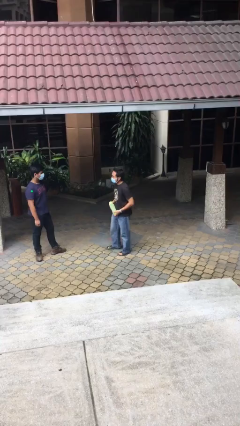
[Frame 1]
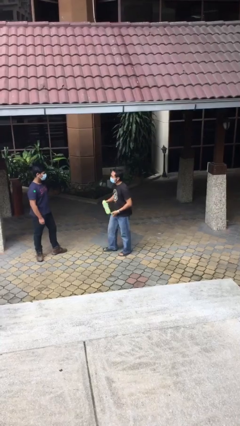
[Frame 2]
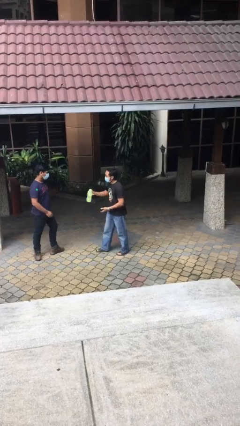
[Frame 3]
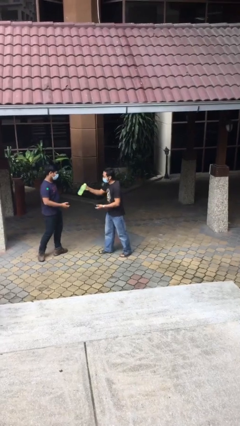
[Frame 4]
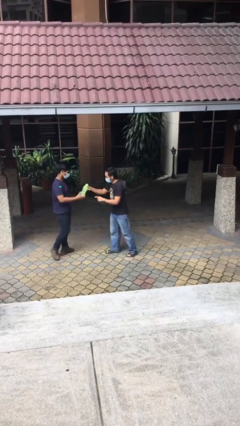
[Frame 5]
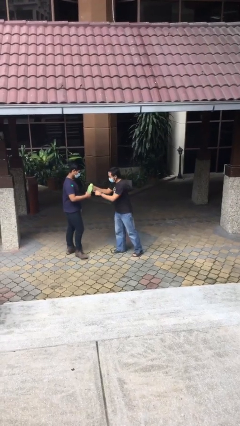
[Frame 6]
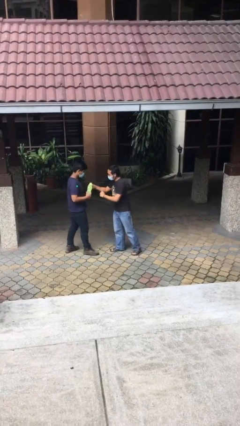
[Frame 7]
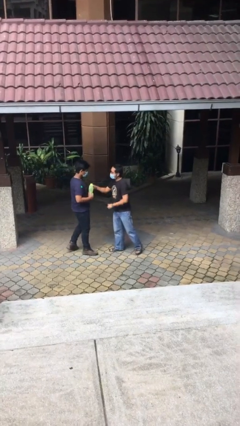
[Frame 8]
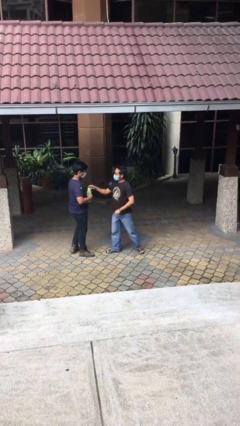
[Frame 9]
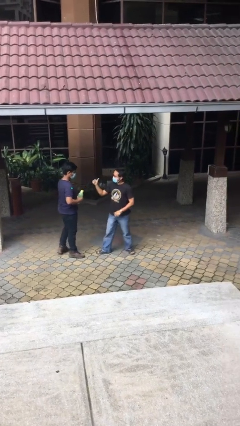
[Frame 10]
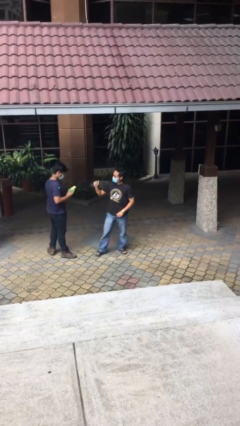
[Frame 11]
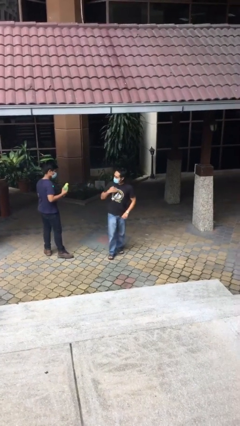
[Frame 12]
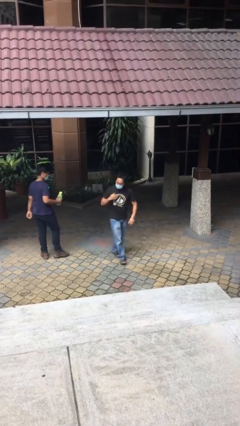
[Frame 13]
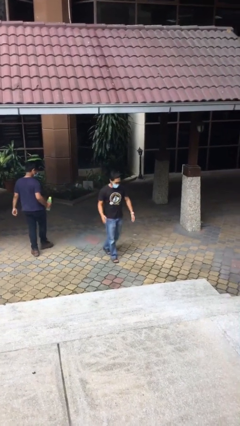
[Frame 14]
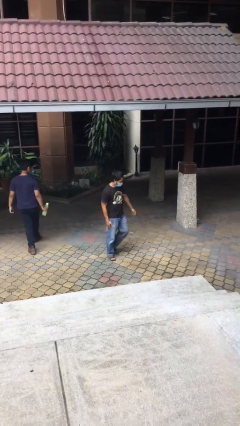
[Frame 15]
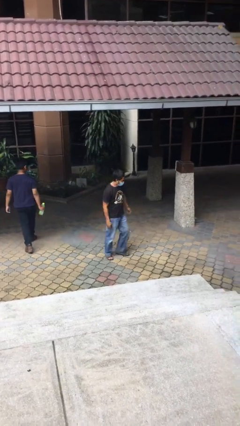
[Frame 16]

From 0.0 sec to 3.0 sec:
person transfers object to person

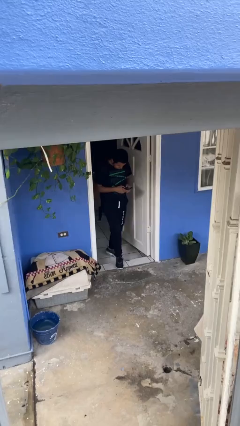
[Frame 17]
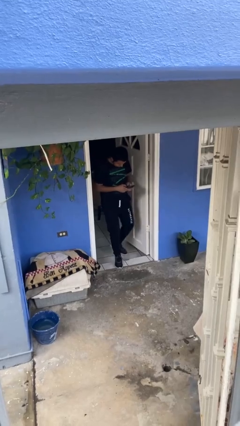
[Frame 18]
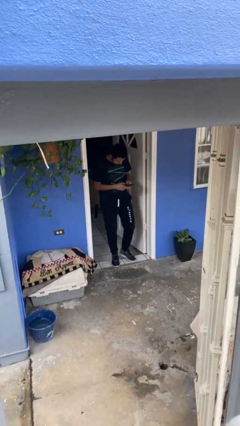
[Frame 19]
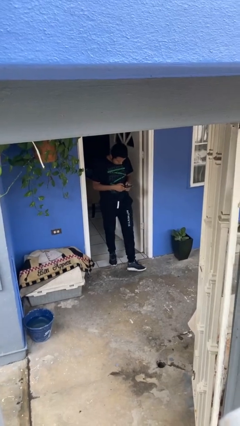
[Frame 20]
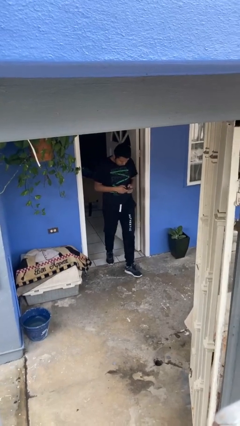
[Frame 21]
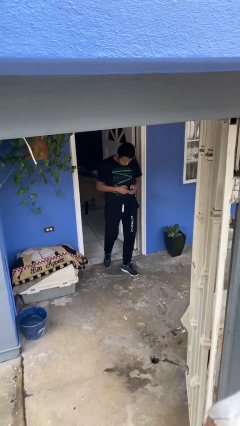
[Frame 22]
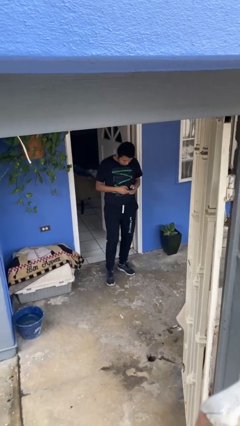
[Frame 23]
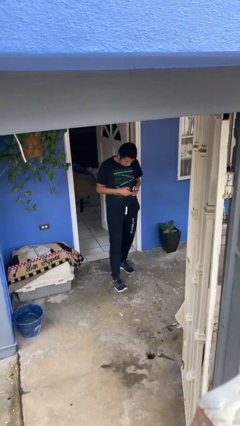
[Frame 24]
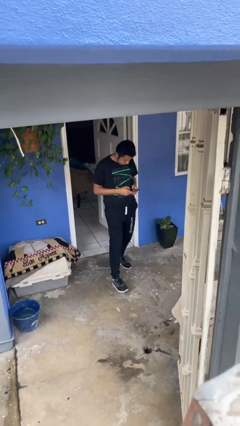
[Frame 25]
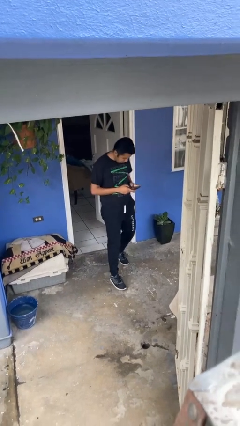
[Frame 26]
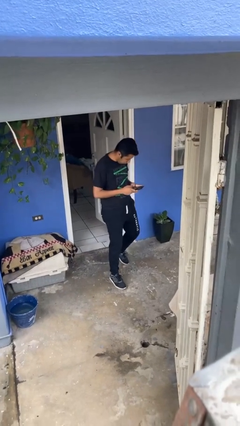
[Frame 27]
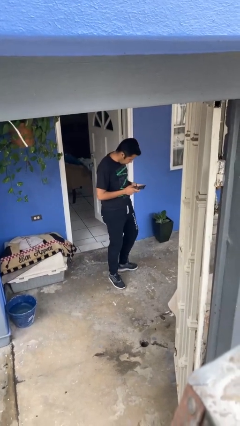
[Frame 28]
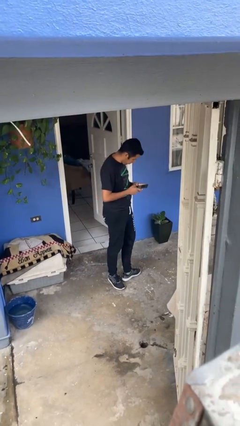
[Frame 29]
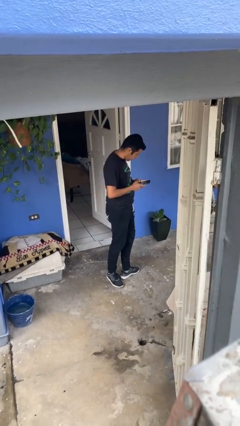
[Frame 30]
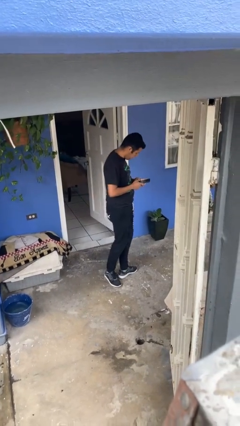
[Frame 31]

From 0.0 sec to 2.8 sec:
person enters scene through structure

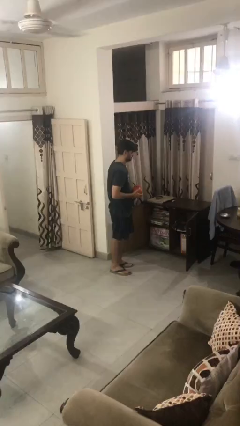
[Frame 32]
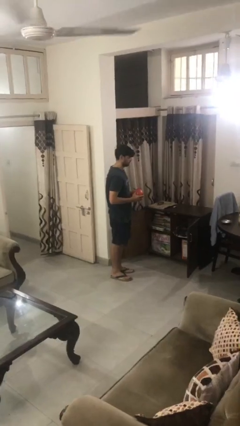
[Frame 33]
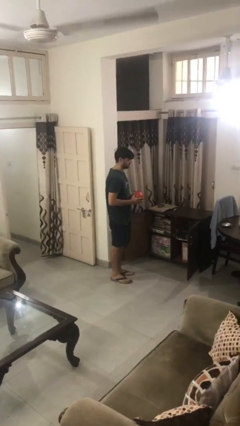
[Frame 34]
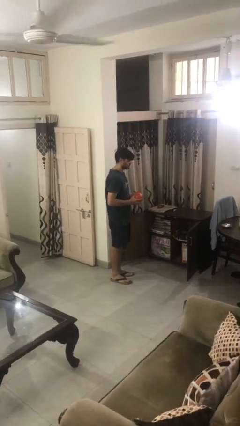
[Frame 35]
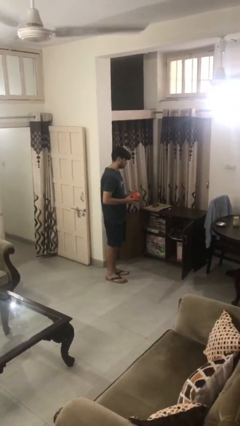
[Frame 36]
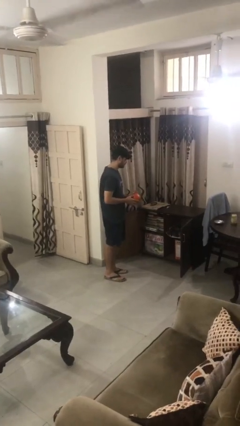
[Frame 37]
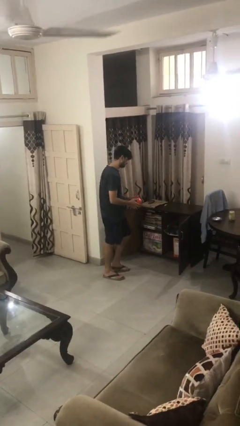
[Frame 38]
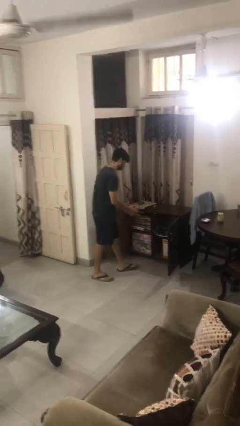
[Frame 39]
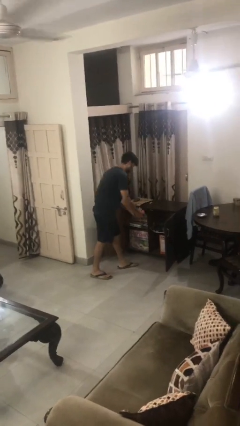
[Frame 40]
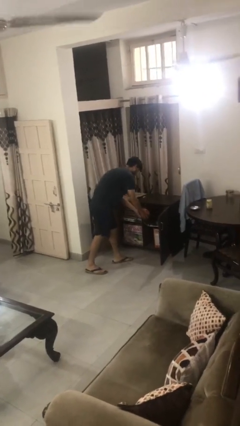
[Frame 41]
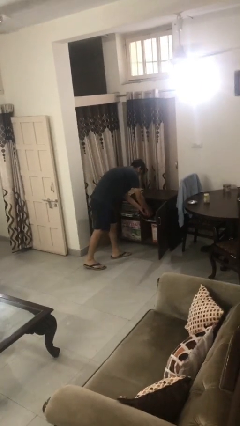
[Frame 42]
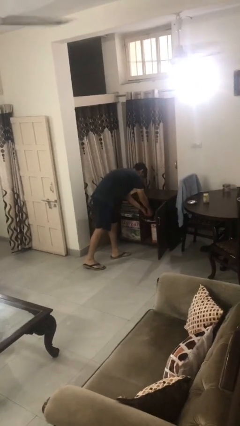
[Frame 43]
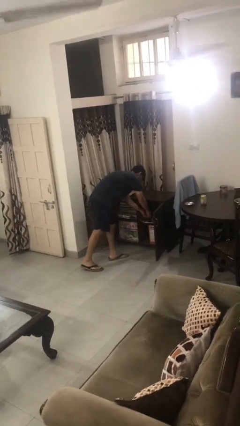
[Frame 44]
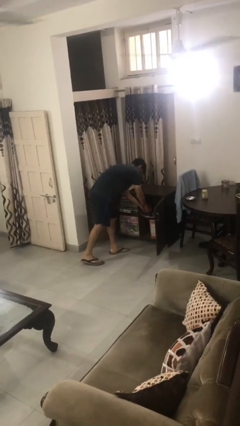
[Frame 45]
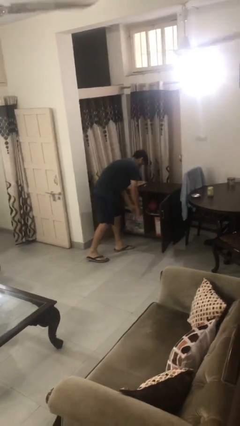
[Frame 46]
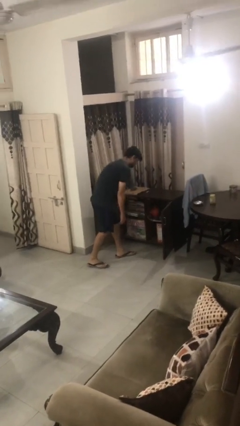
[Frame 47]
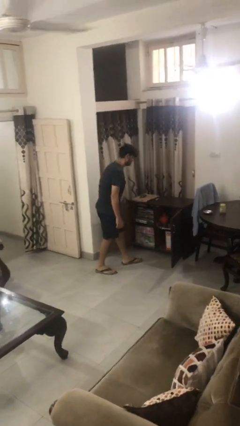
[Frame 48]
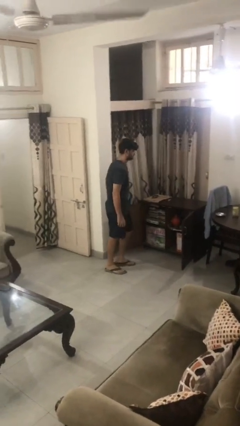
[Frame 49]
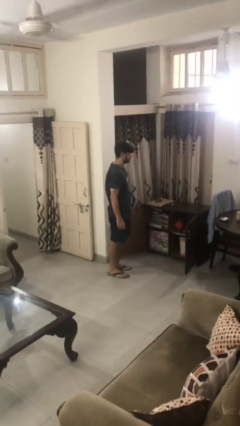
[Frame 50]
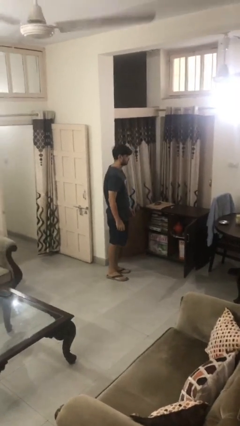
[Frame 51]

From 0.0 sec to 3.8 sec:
person puts down object into cabinet

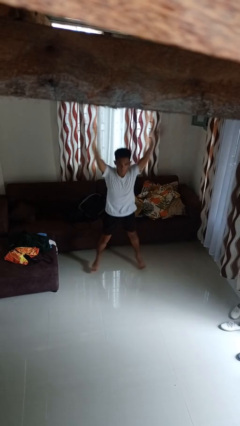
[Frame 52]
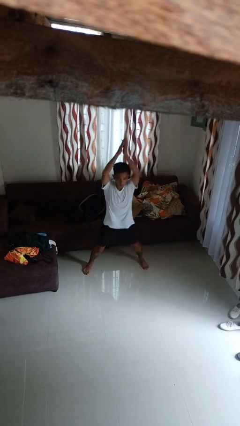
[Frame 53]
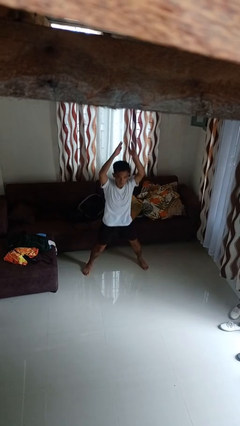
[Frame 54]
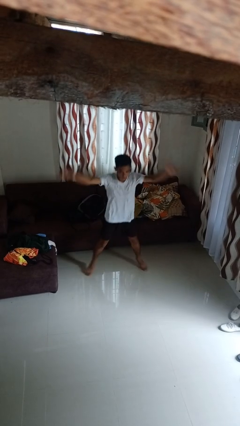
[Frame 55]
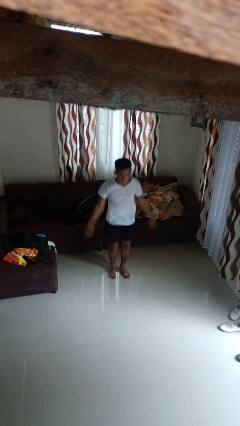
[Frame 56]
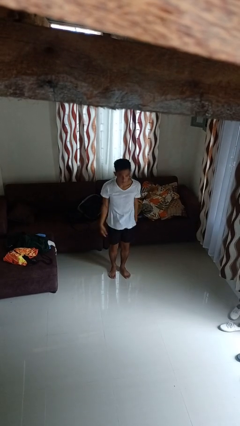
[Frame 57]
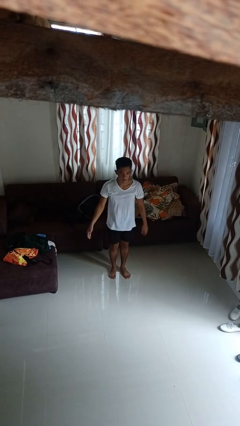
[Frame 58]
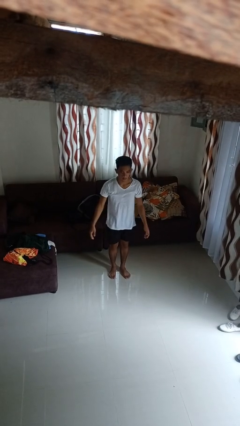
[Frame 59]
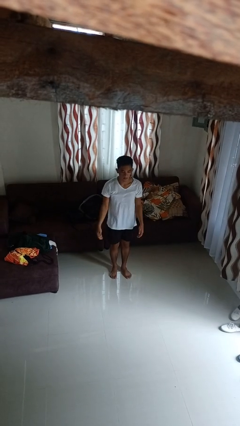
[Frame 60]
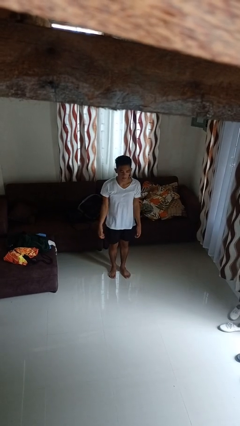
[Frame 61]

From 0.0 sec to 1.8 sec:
person exercises with jumping jacks

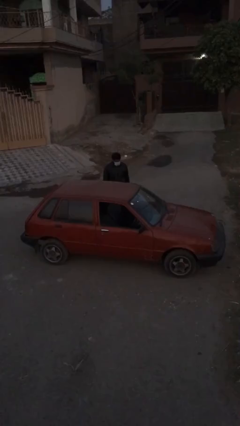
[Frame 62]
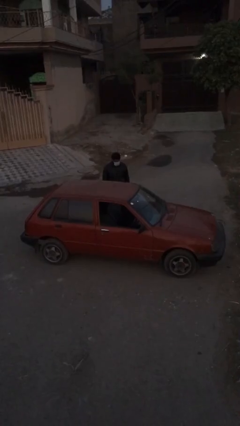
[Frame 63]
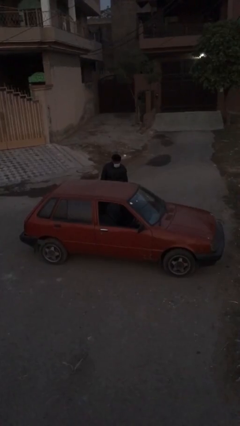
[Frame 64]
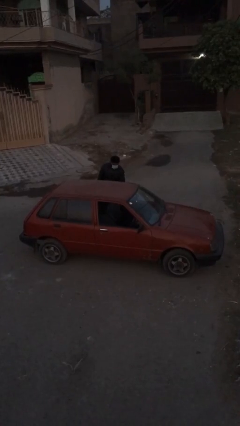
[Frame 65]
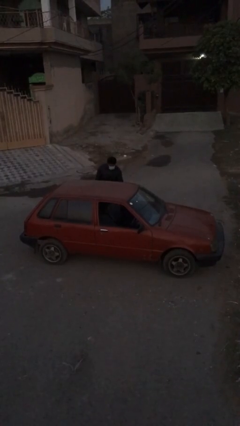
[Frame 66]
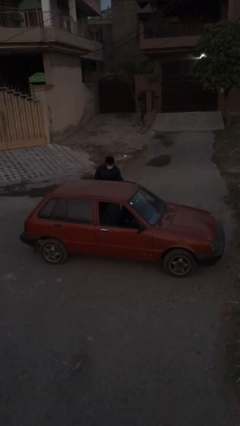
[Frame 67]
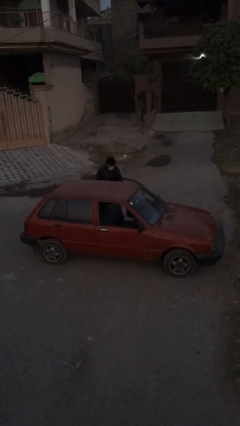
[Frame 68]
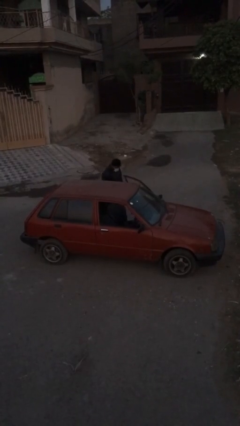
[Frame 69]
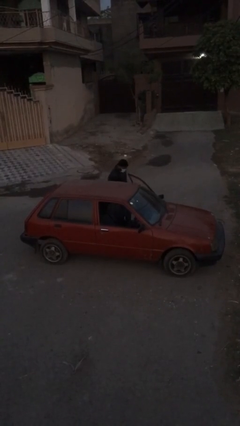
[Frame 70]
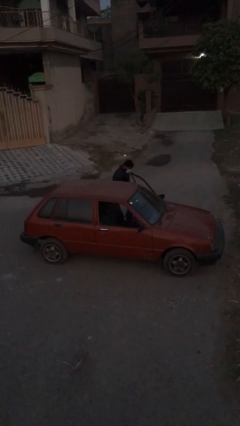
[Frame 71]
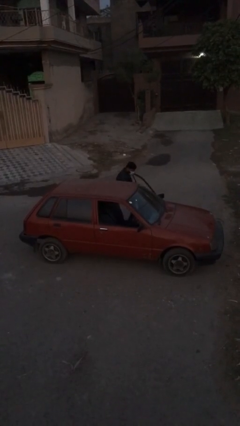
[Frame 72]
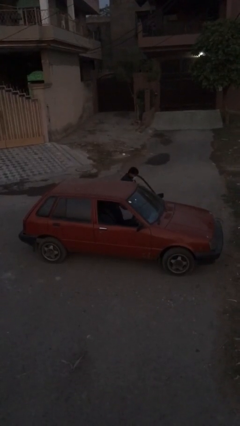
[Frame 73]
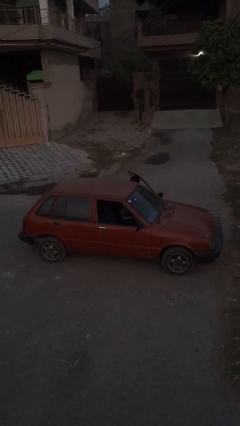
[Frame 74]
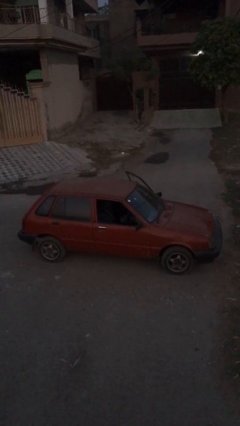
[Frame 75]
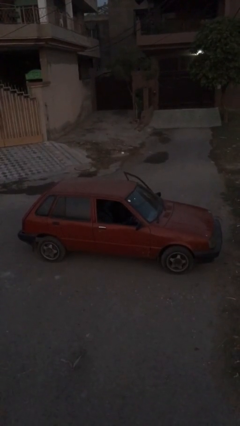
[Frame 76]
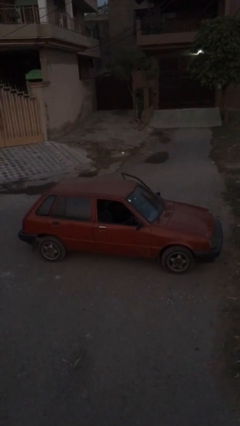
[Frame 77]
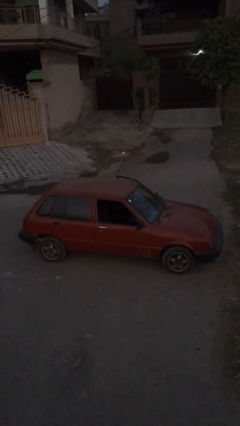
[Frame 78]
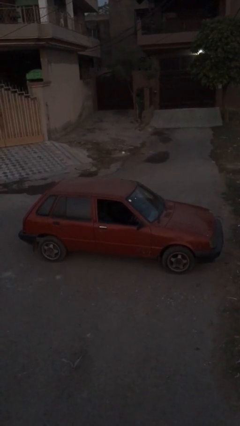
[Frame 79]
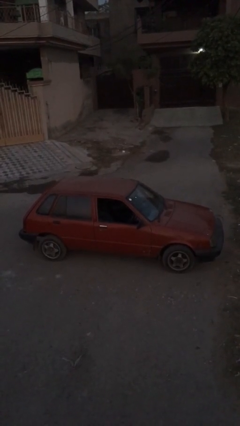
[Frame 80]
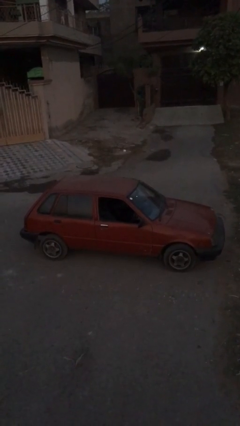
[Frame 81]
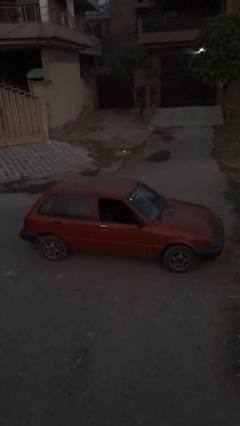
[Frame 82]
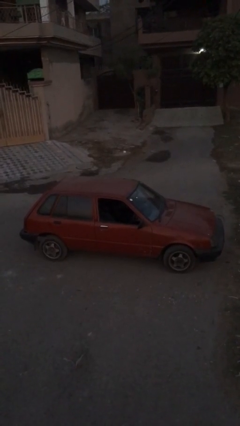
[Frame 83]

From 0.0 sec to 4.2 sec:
car picks up person

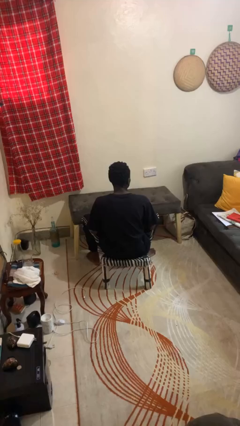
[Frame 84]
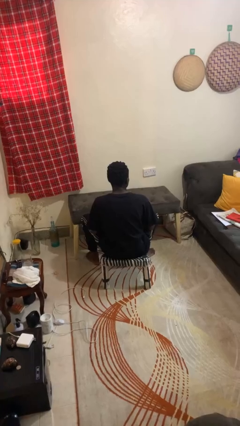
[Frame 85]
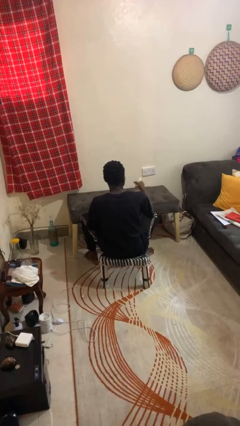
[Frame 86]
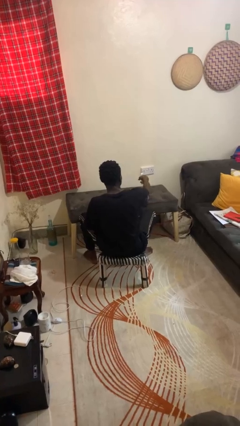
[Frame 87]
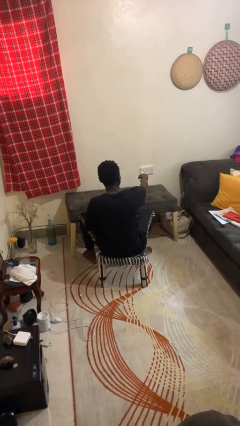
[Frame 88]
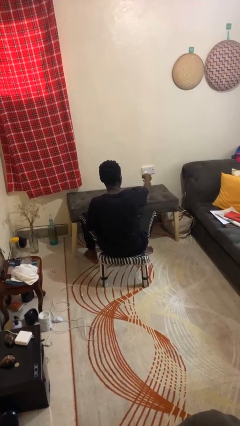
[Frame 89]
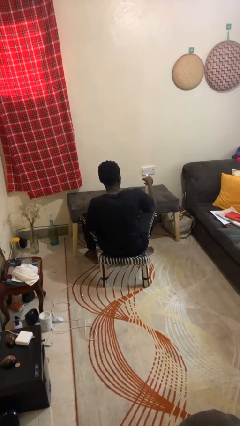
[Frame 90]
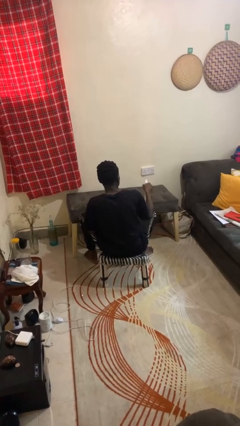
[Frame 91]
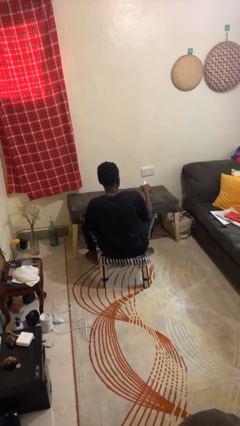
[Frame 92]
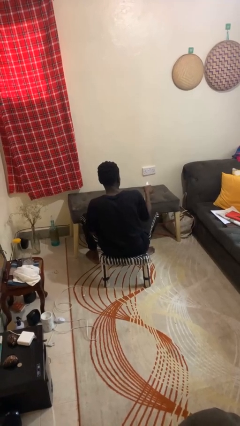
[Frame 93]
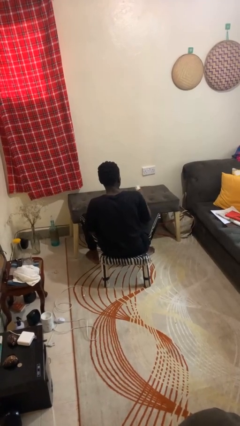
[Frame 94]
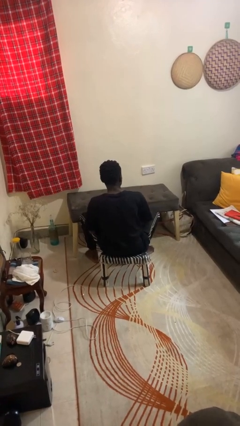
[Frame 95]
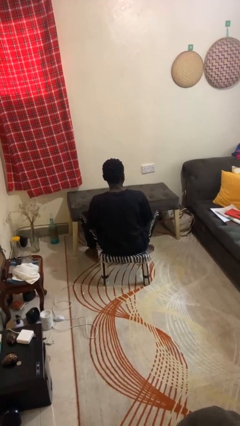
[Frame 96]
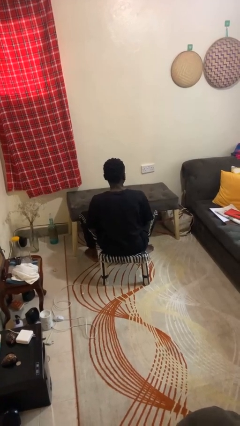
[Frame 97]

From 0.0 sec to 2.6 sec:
person sprays from bottle
